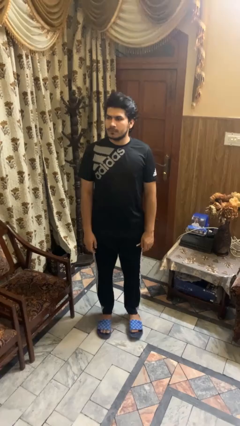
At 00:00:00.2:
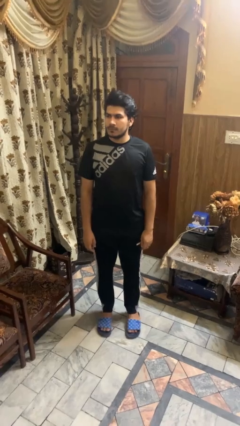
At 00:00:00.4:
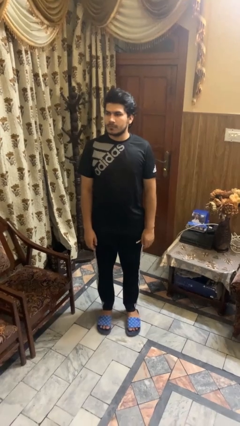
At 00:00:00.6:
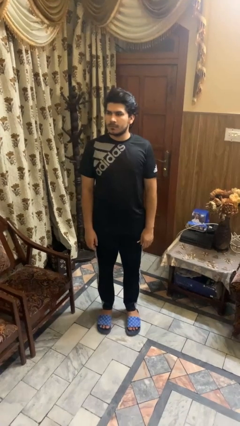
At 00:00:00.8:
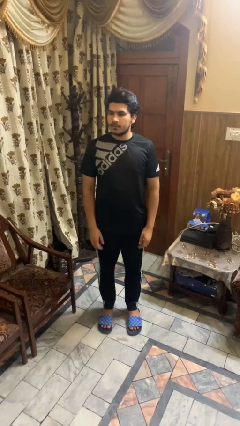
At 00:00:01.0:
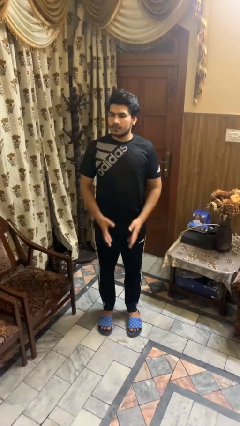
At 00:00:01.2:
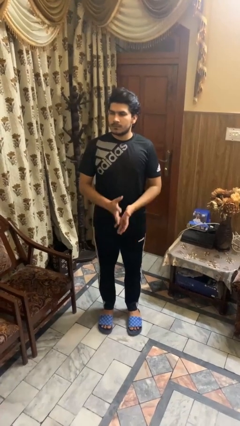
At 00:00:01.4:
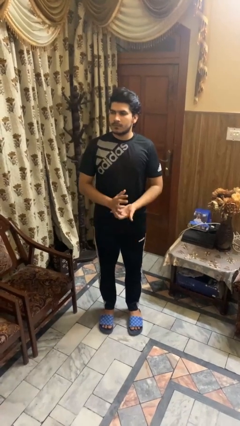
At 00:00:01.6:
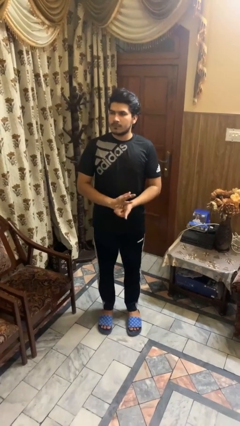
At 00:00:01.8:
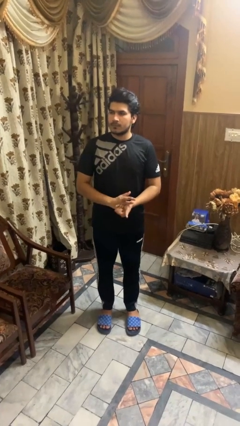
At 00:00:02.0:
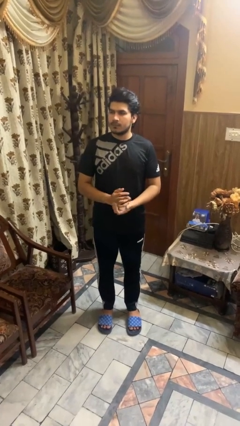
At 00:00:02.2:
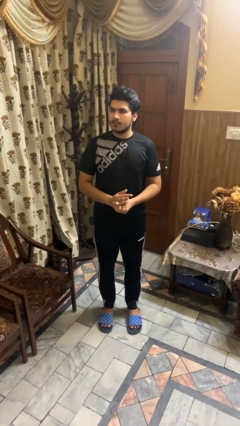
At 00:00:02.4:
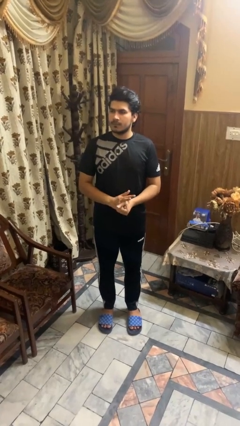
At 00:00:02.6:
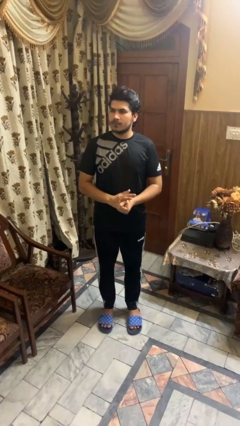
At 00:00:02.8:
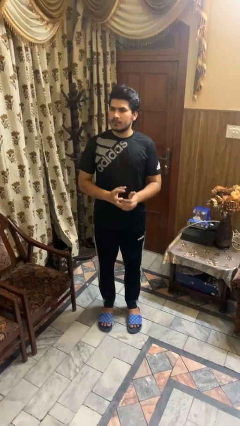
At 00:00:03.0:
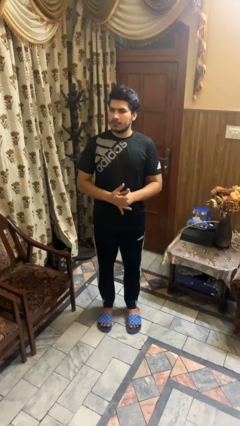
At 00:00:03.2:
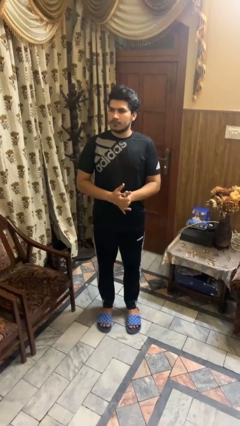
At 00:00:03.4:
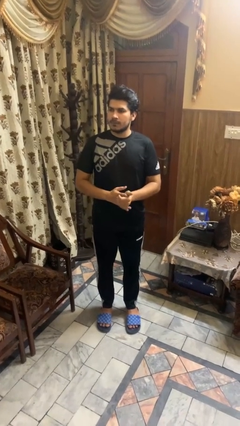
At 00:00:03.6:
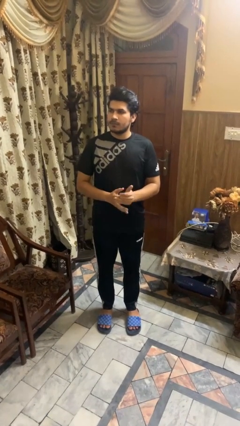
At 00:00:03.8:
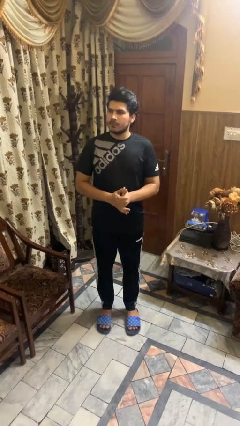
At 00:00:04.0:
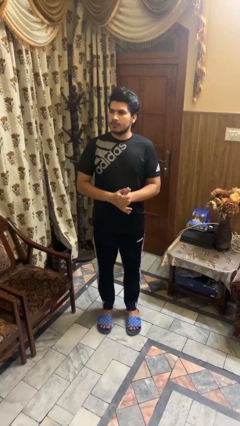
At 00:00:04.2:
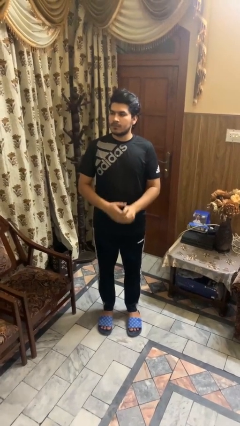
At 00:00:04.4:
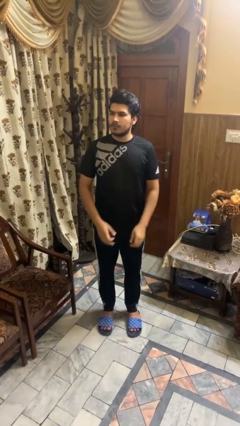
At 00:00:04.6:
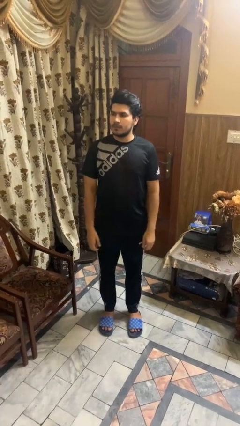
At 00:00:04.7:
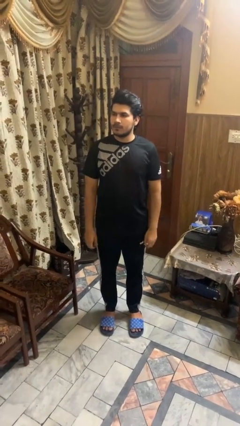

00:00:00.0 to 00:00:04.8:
person cracks knuckles

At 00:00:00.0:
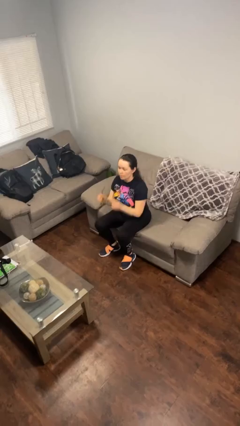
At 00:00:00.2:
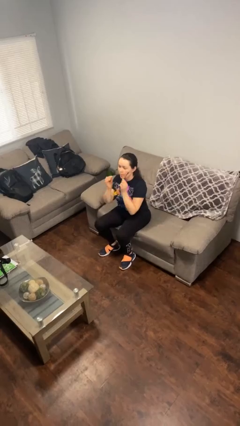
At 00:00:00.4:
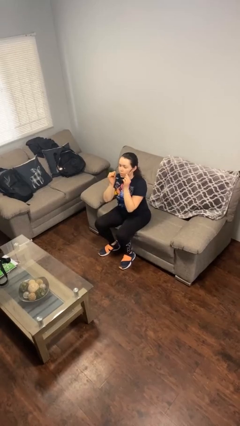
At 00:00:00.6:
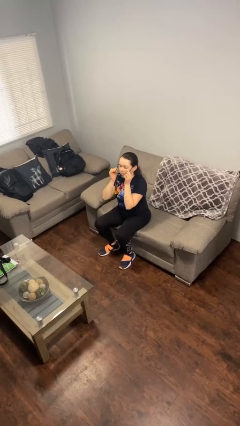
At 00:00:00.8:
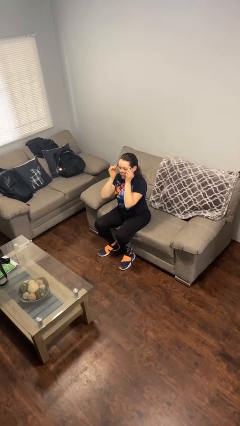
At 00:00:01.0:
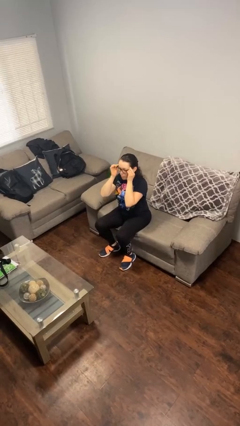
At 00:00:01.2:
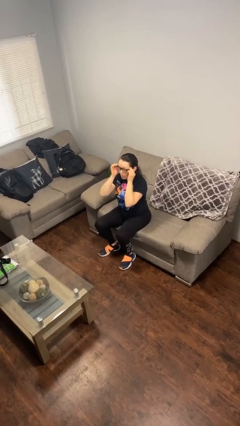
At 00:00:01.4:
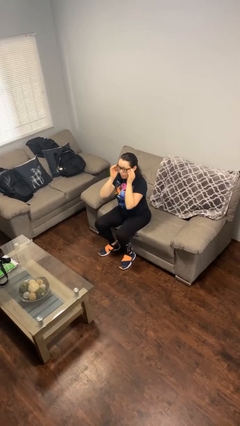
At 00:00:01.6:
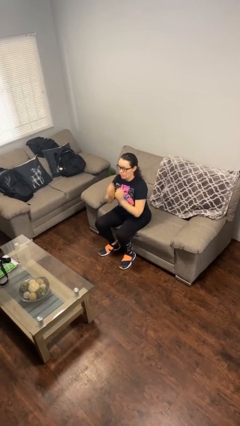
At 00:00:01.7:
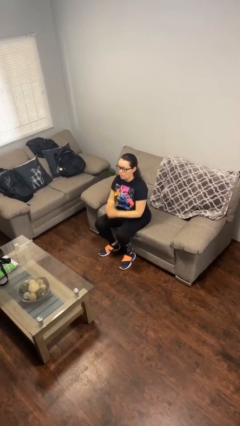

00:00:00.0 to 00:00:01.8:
person puts on glasses

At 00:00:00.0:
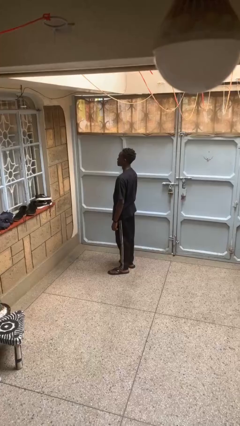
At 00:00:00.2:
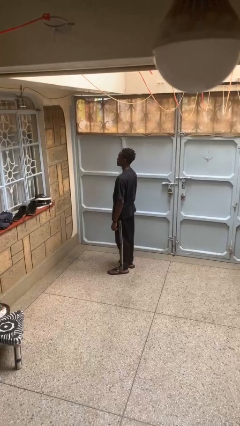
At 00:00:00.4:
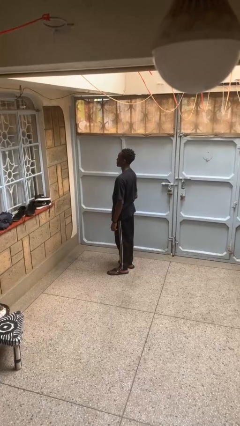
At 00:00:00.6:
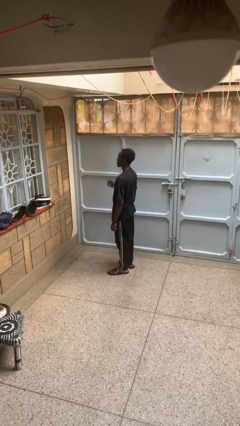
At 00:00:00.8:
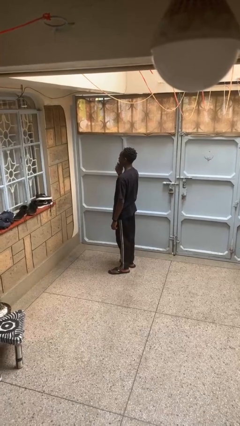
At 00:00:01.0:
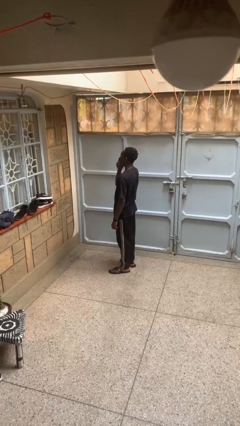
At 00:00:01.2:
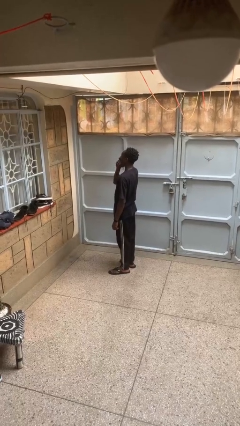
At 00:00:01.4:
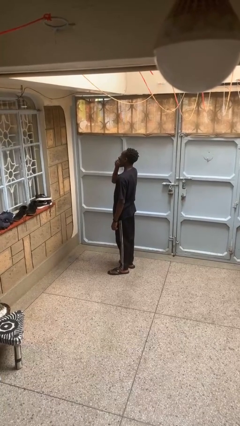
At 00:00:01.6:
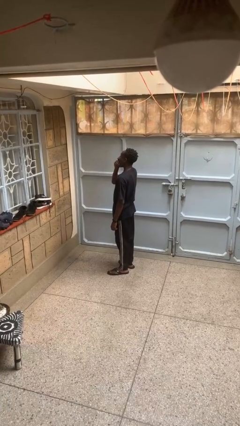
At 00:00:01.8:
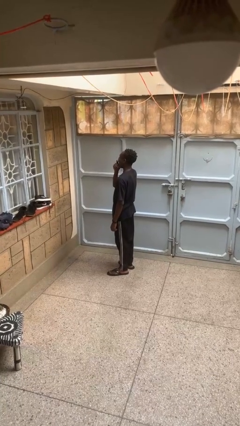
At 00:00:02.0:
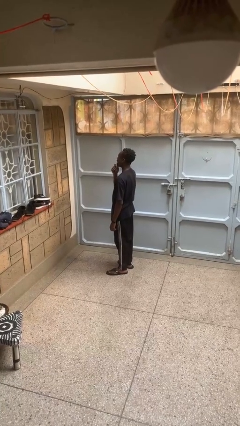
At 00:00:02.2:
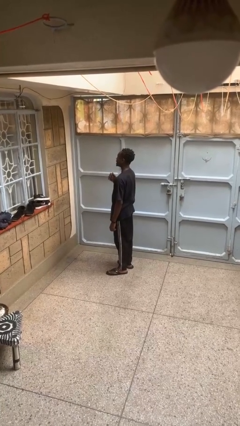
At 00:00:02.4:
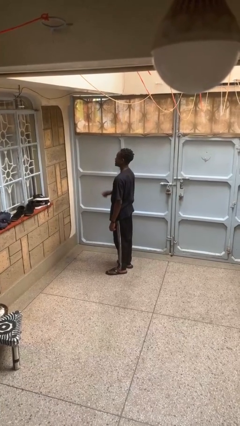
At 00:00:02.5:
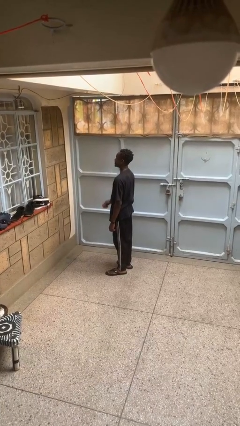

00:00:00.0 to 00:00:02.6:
person yawns

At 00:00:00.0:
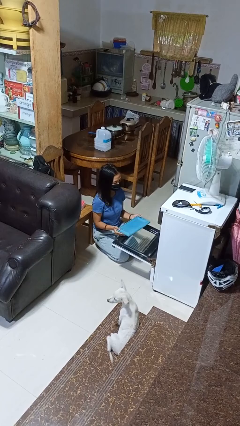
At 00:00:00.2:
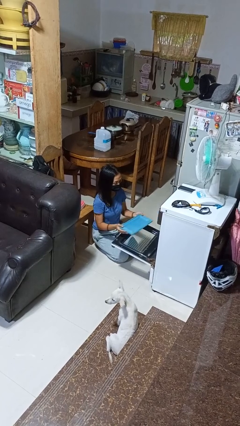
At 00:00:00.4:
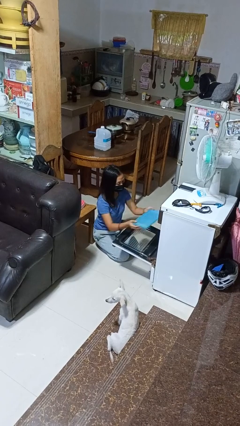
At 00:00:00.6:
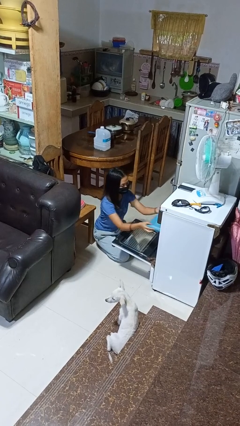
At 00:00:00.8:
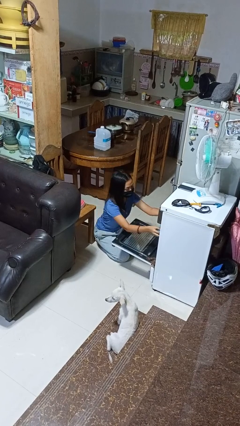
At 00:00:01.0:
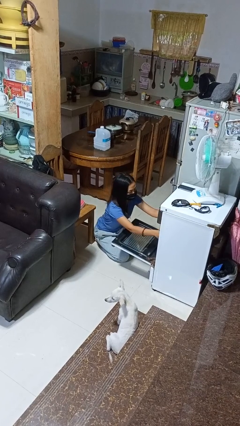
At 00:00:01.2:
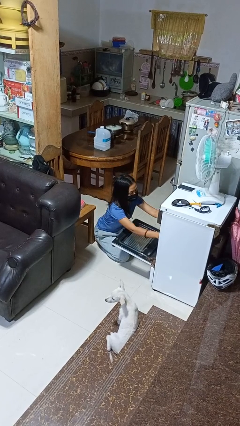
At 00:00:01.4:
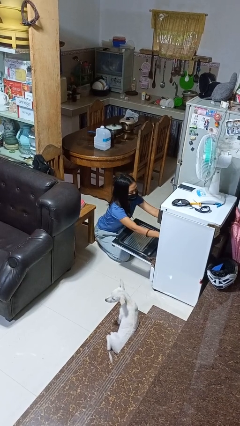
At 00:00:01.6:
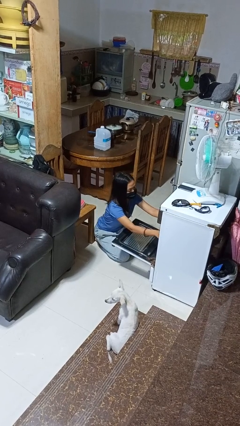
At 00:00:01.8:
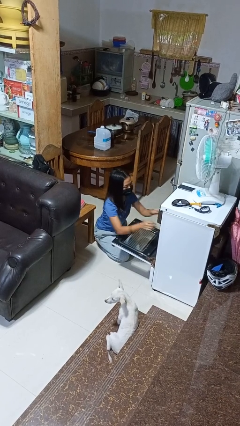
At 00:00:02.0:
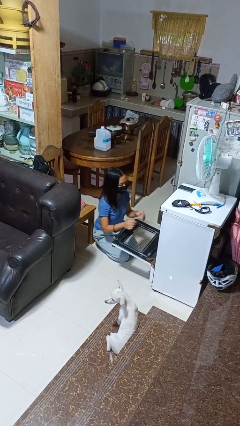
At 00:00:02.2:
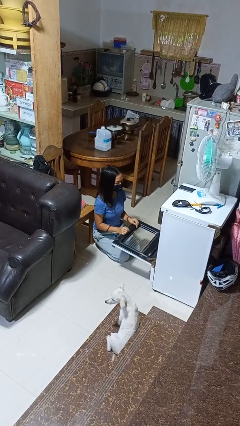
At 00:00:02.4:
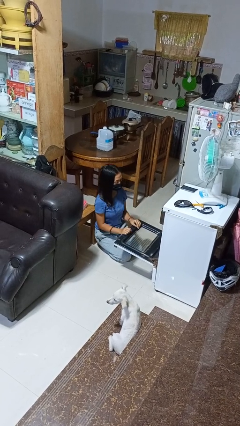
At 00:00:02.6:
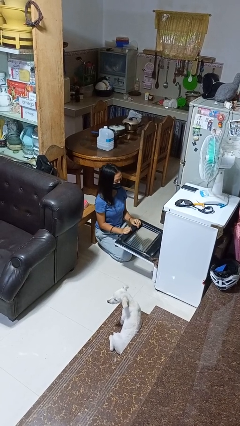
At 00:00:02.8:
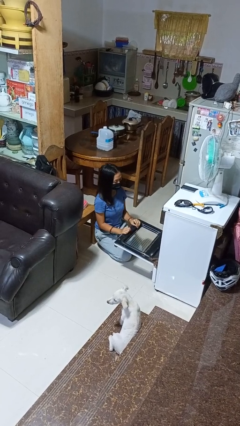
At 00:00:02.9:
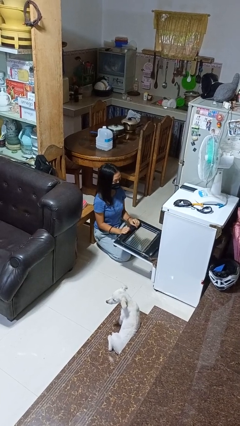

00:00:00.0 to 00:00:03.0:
person puts object into oven

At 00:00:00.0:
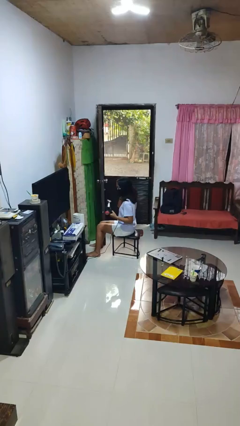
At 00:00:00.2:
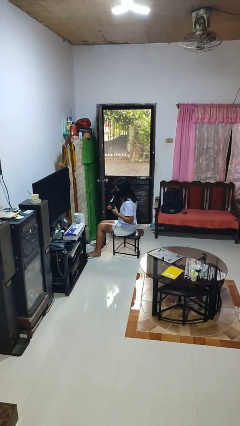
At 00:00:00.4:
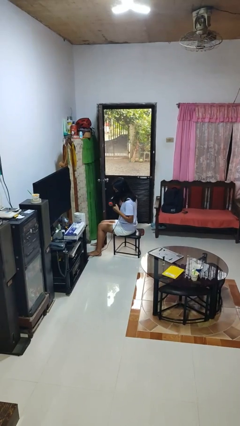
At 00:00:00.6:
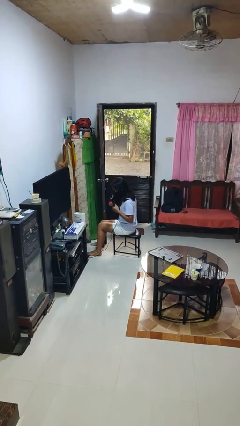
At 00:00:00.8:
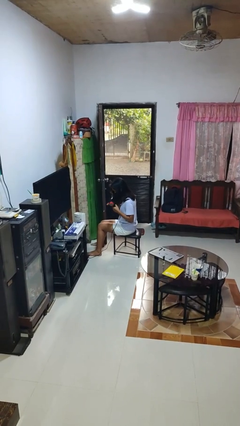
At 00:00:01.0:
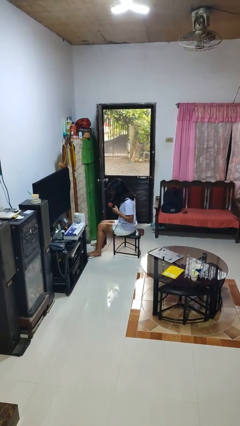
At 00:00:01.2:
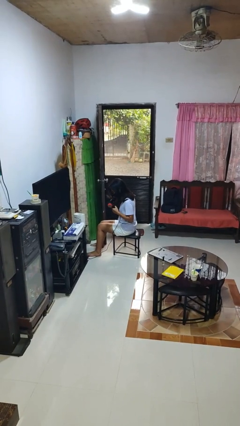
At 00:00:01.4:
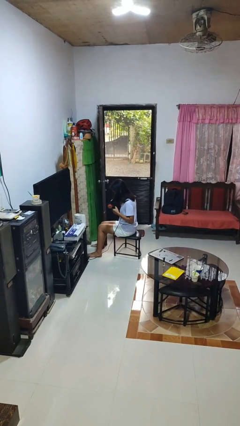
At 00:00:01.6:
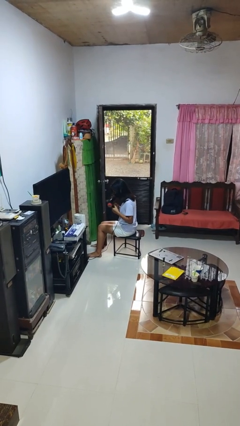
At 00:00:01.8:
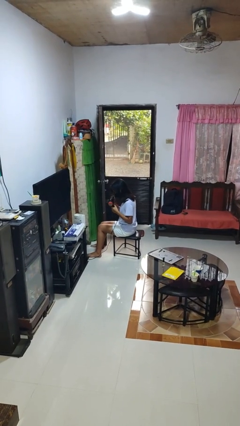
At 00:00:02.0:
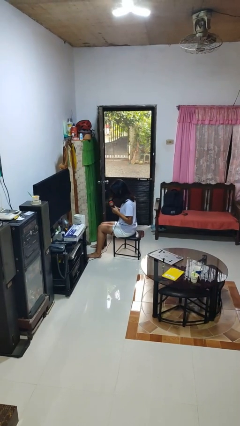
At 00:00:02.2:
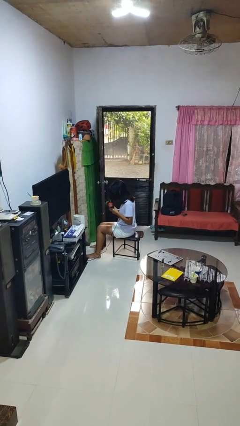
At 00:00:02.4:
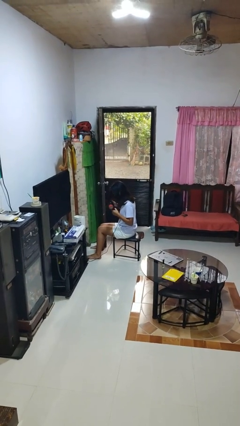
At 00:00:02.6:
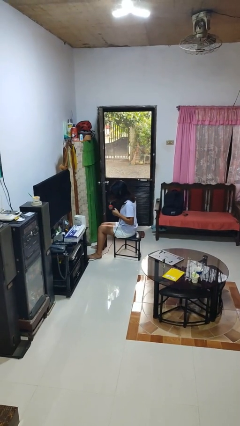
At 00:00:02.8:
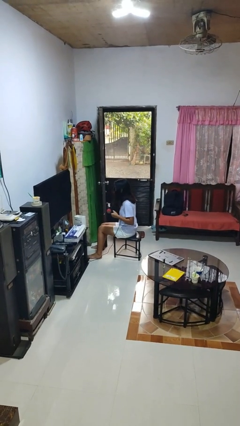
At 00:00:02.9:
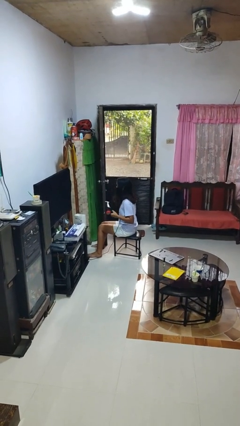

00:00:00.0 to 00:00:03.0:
person dries hair with hairdryer

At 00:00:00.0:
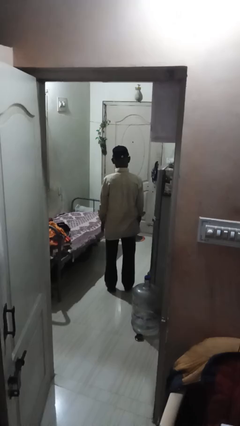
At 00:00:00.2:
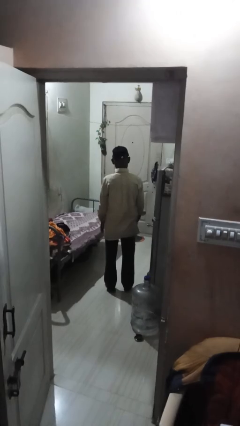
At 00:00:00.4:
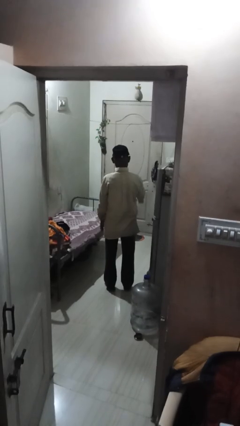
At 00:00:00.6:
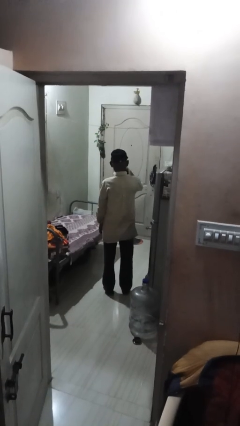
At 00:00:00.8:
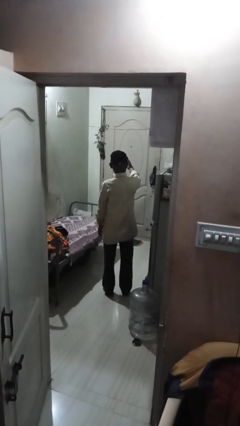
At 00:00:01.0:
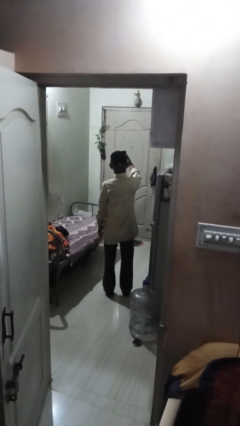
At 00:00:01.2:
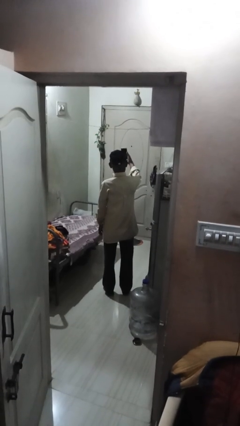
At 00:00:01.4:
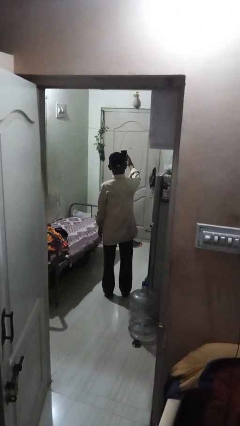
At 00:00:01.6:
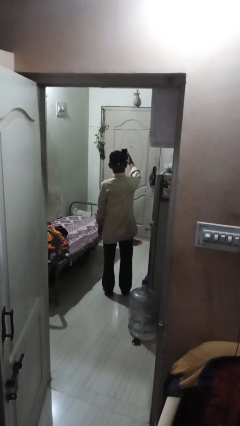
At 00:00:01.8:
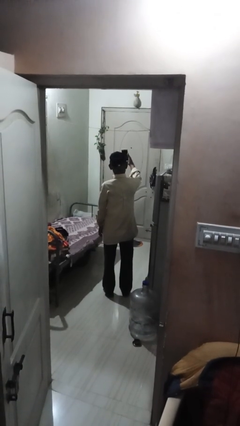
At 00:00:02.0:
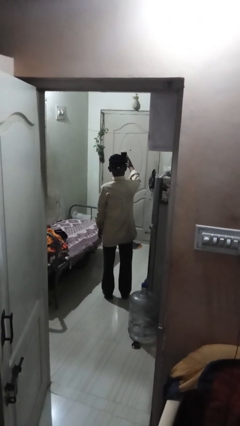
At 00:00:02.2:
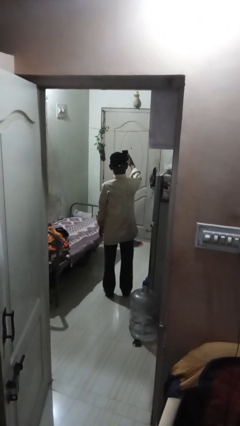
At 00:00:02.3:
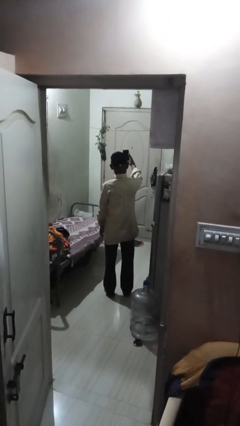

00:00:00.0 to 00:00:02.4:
person takes selfie
